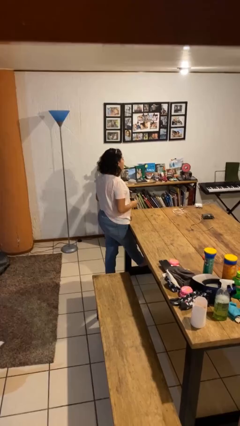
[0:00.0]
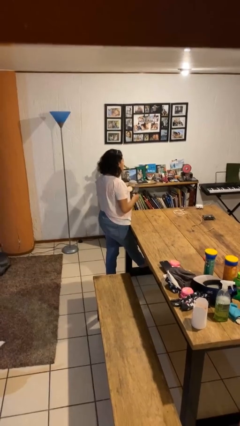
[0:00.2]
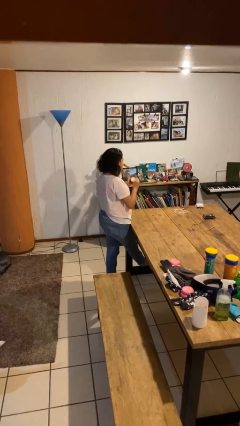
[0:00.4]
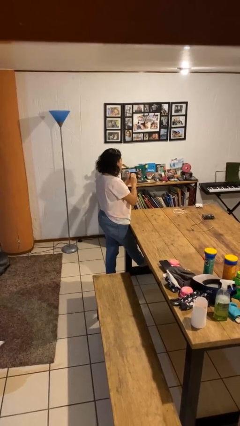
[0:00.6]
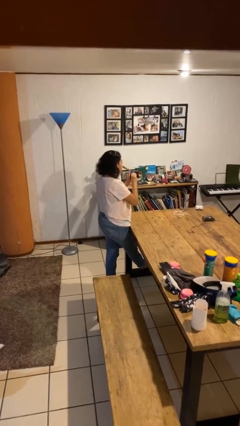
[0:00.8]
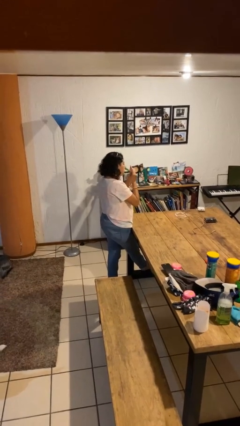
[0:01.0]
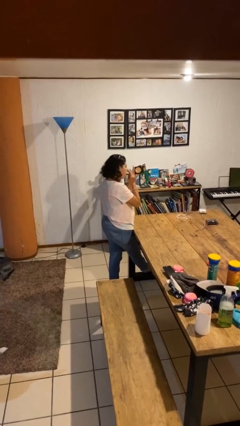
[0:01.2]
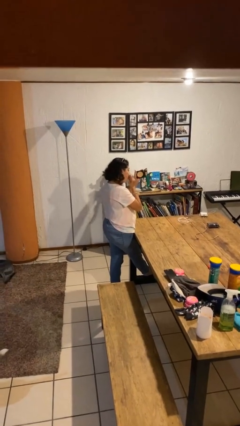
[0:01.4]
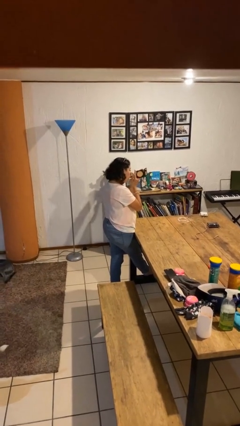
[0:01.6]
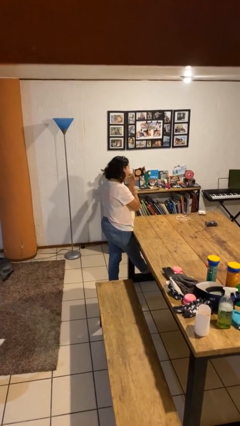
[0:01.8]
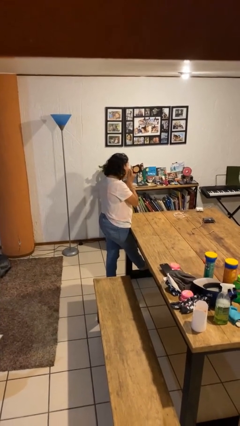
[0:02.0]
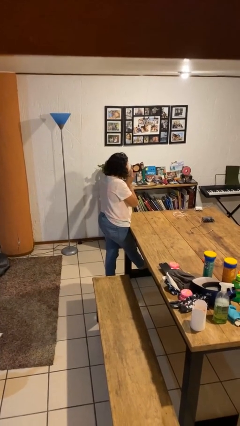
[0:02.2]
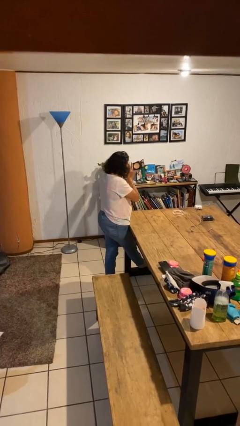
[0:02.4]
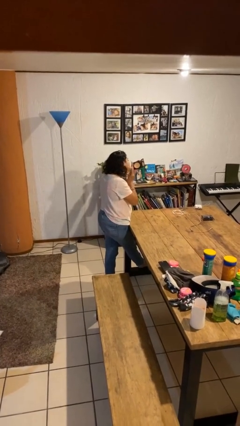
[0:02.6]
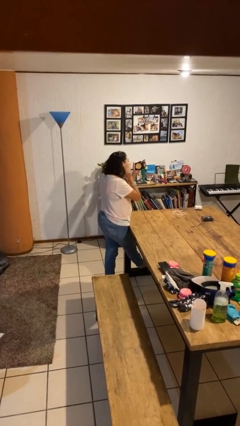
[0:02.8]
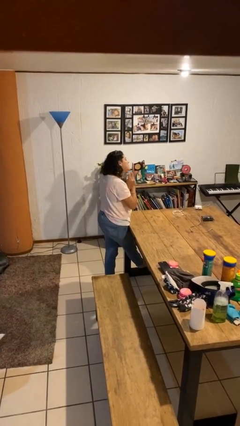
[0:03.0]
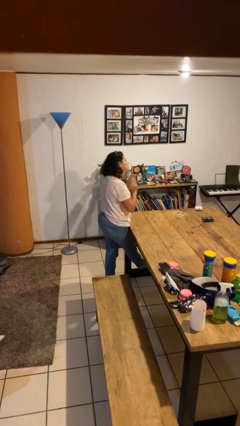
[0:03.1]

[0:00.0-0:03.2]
person applies foundation makeup

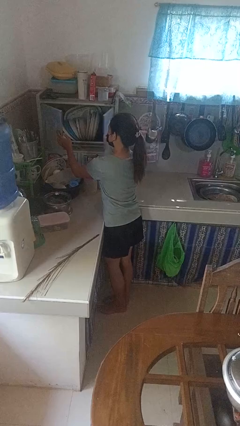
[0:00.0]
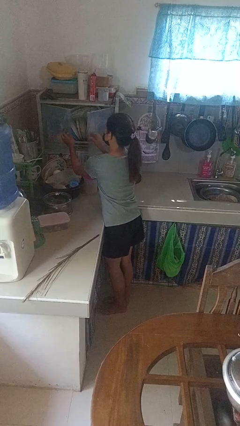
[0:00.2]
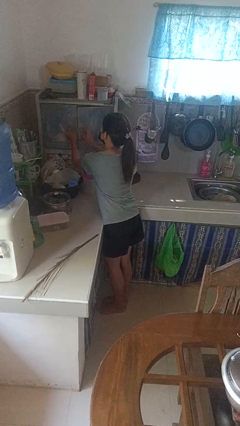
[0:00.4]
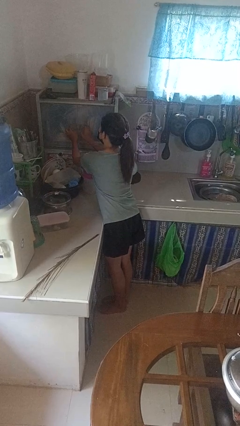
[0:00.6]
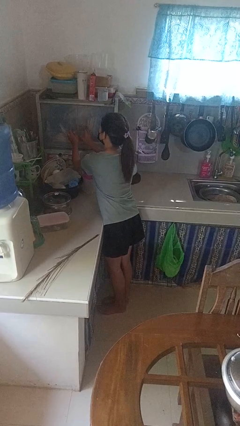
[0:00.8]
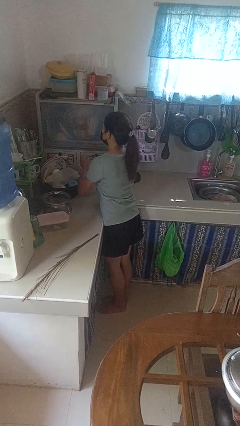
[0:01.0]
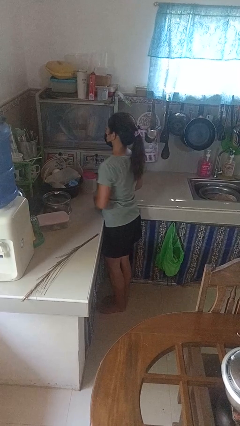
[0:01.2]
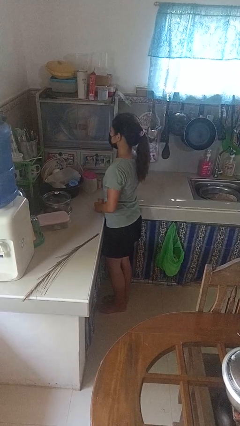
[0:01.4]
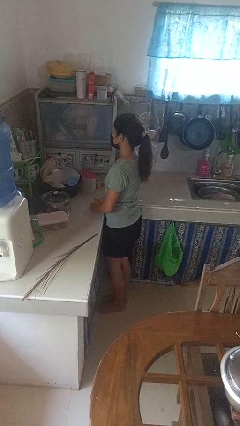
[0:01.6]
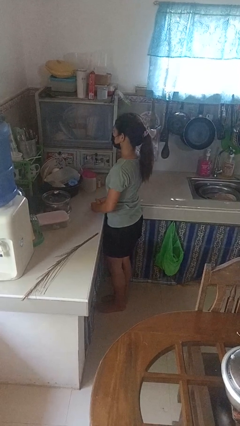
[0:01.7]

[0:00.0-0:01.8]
person closes kitchen drawer

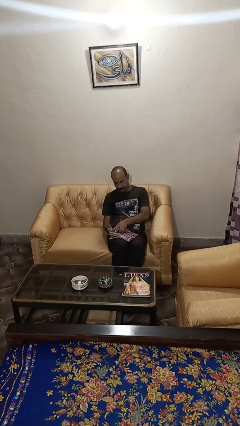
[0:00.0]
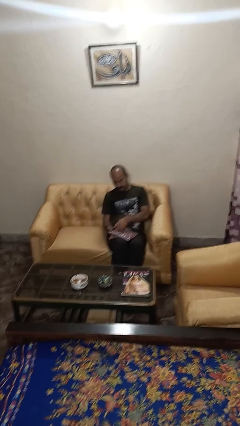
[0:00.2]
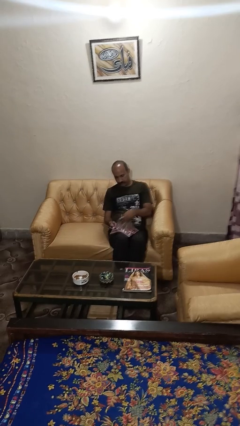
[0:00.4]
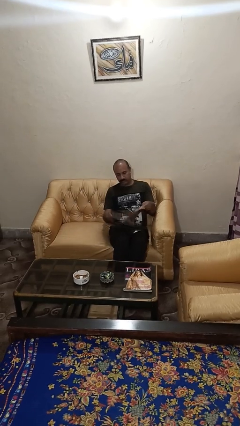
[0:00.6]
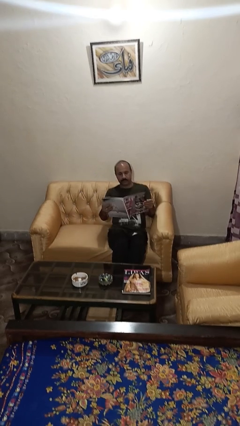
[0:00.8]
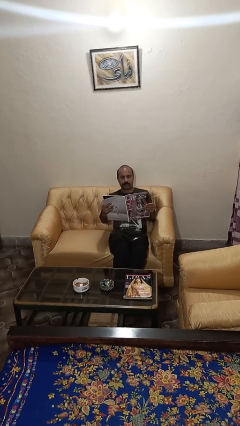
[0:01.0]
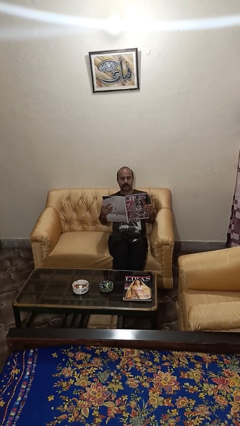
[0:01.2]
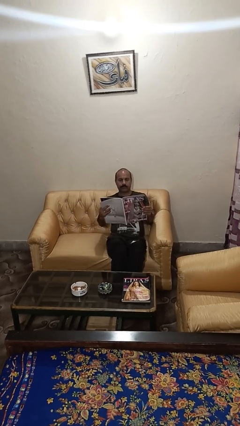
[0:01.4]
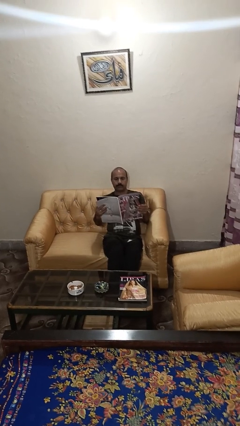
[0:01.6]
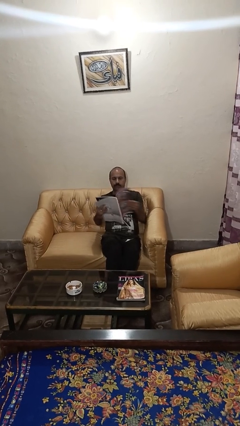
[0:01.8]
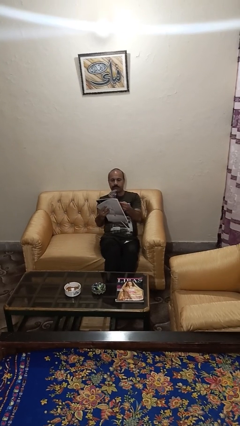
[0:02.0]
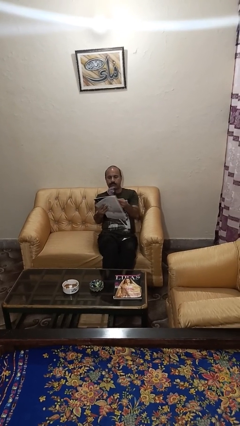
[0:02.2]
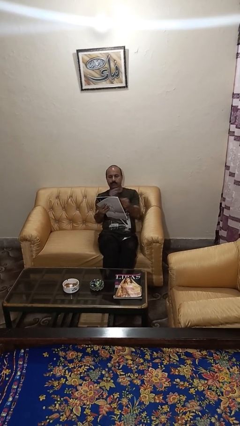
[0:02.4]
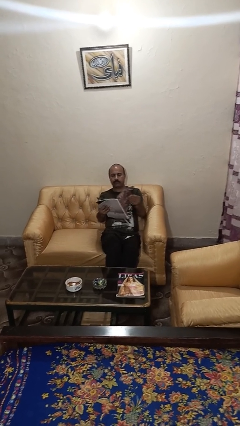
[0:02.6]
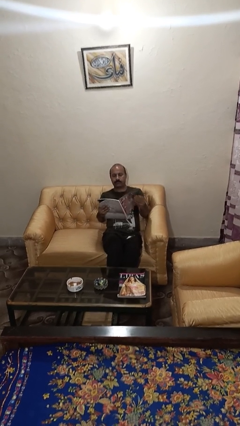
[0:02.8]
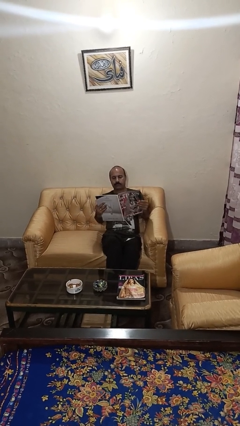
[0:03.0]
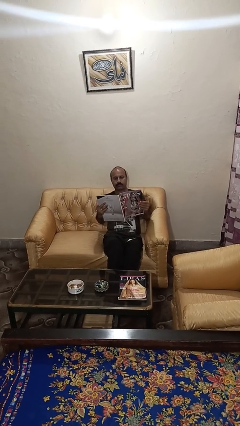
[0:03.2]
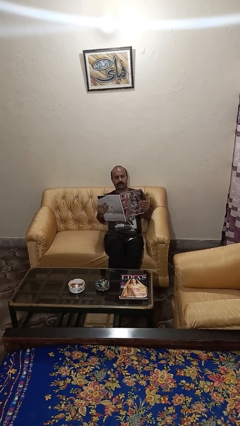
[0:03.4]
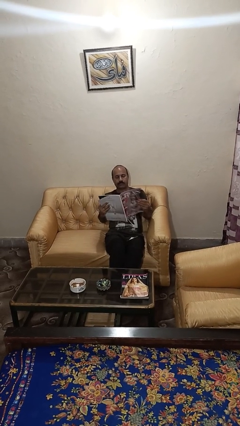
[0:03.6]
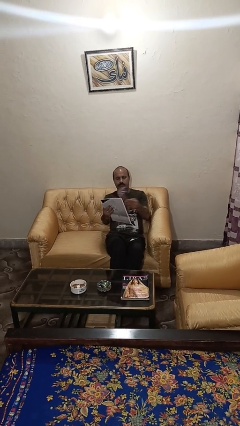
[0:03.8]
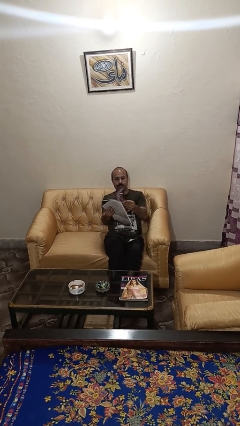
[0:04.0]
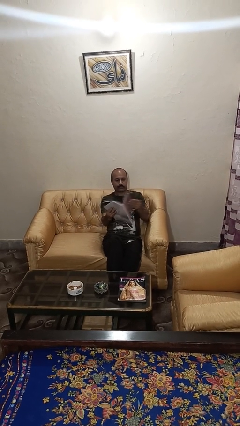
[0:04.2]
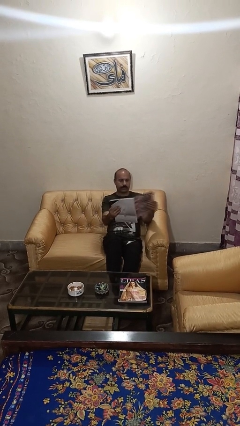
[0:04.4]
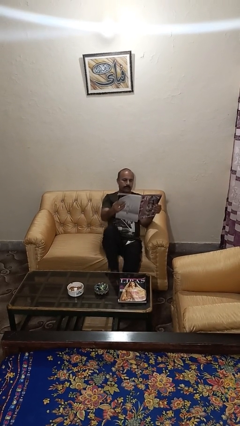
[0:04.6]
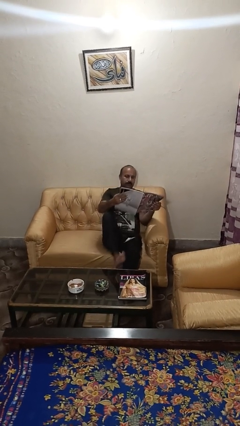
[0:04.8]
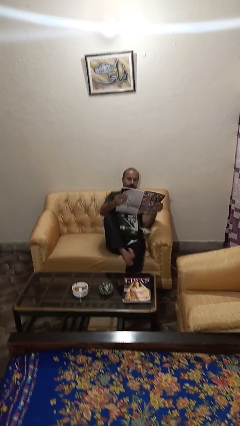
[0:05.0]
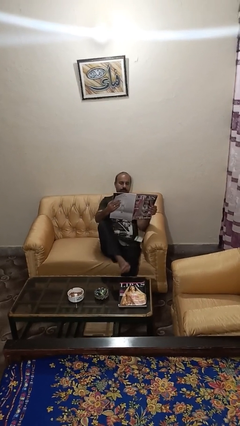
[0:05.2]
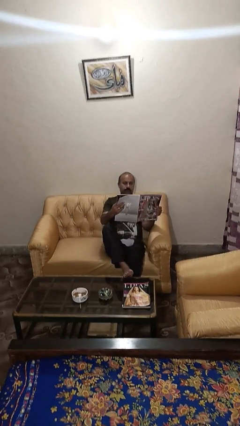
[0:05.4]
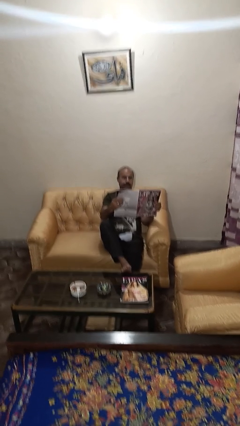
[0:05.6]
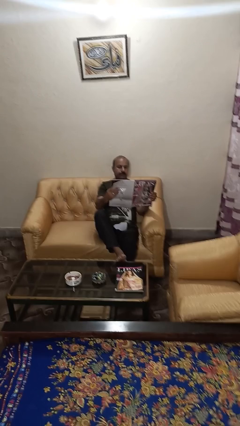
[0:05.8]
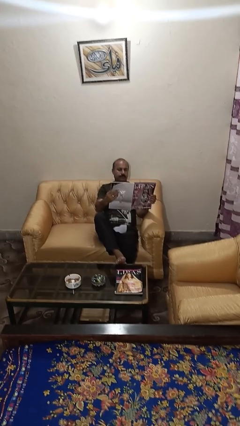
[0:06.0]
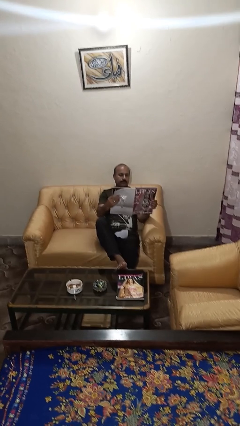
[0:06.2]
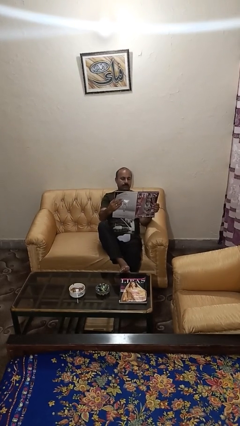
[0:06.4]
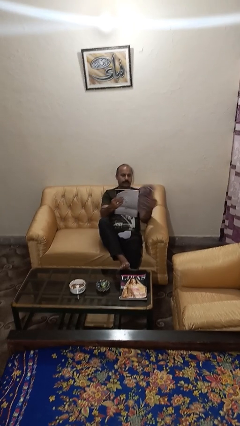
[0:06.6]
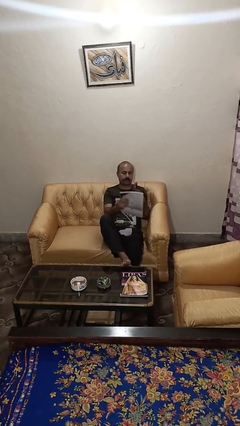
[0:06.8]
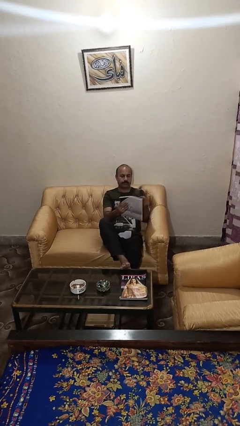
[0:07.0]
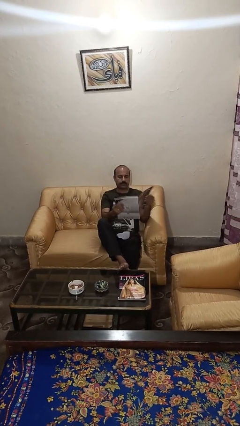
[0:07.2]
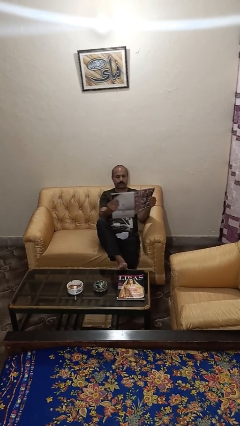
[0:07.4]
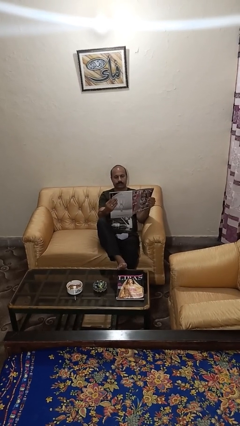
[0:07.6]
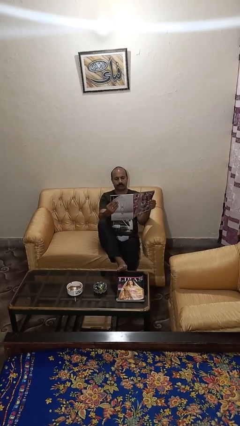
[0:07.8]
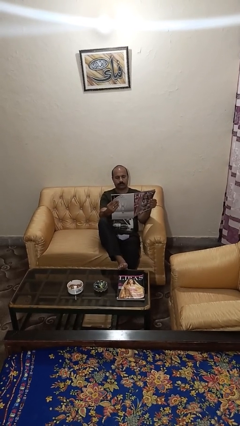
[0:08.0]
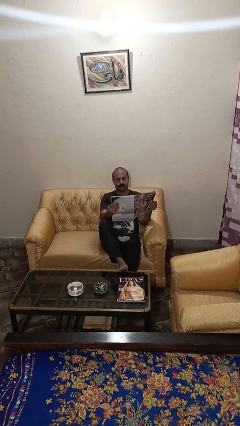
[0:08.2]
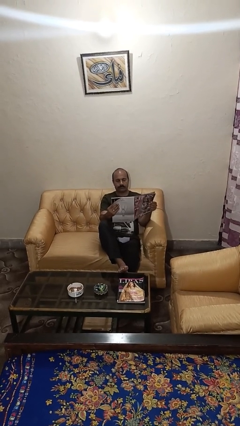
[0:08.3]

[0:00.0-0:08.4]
person reads magazine

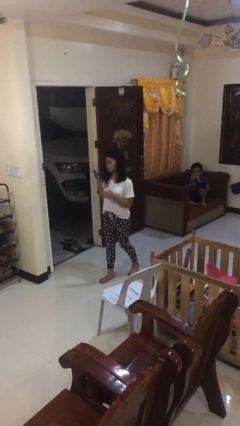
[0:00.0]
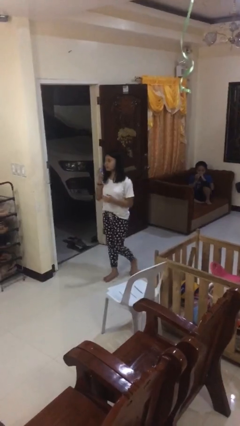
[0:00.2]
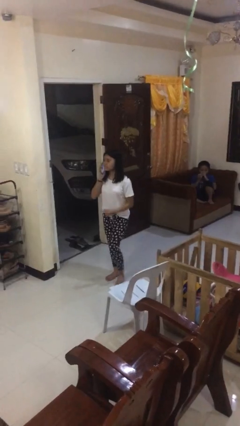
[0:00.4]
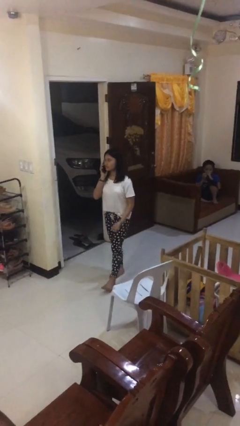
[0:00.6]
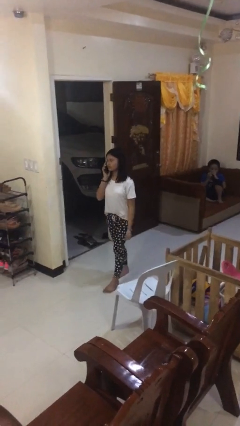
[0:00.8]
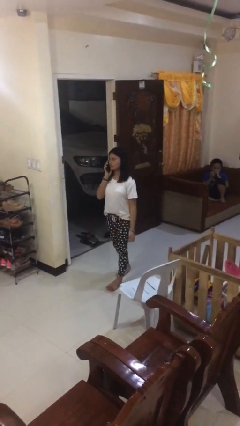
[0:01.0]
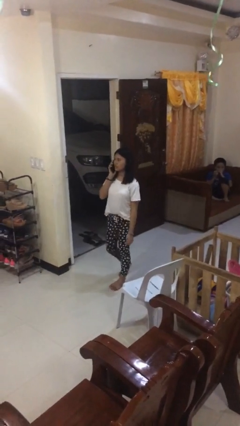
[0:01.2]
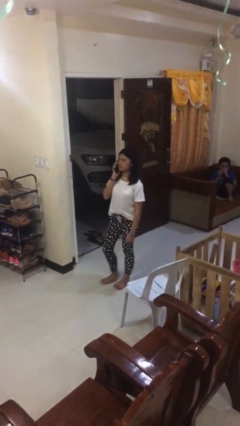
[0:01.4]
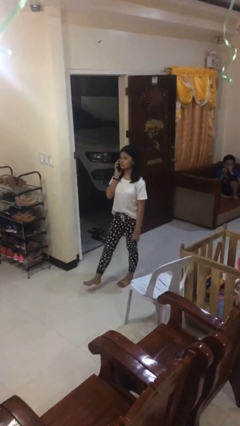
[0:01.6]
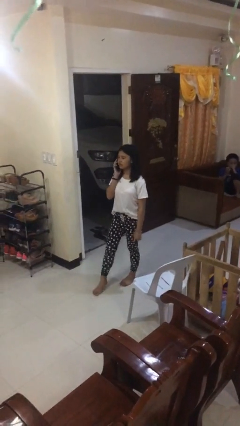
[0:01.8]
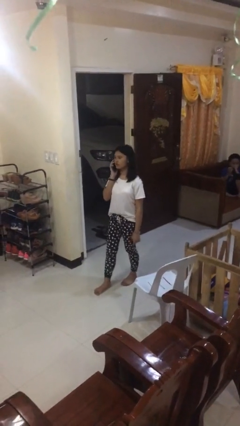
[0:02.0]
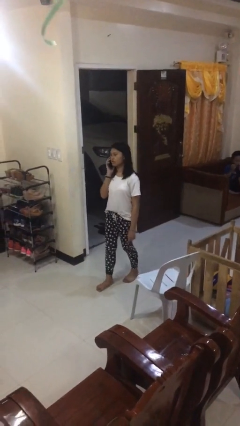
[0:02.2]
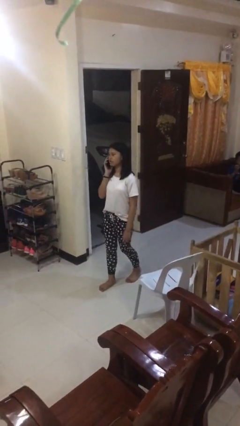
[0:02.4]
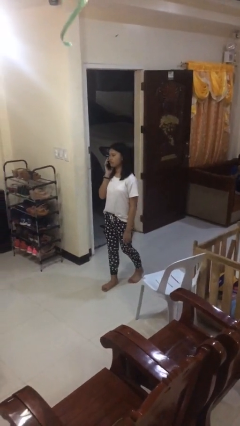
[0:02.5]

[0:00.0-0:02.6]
person talks on phone

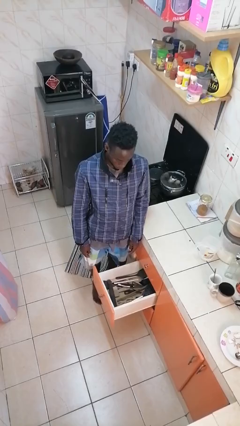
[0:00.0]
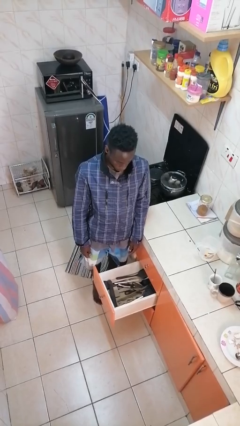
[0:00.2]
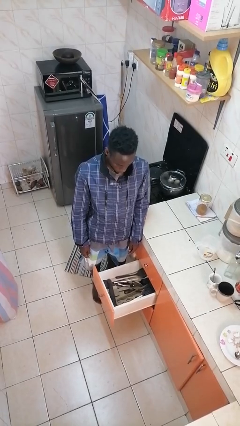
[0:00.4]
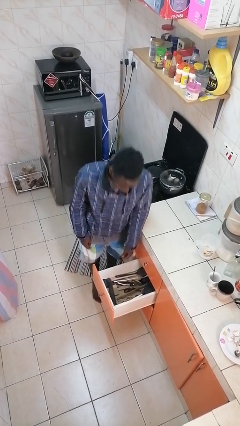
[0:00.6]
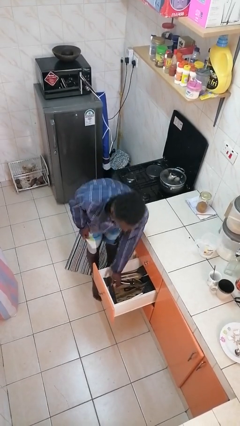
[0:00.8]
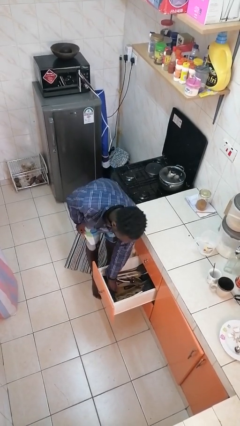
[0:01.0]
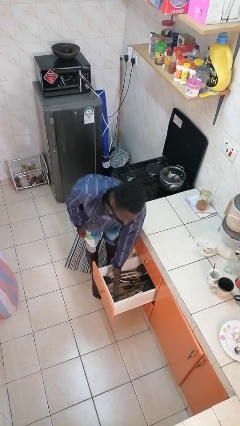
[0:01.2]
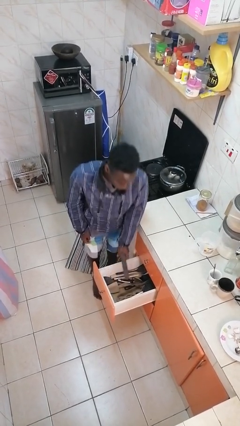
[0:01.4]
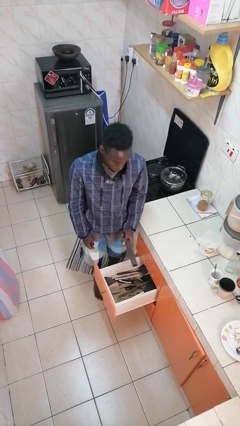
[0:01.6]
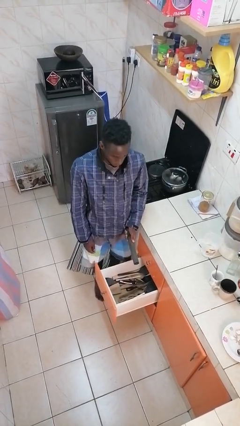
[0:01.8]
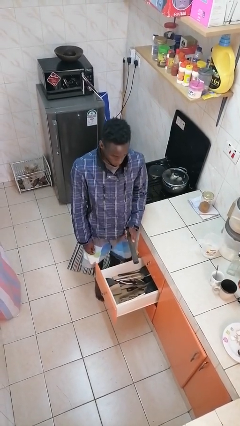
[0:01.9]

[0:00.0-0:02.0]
person takes object from kitchen drawer
